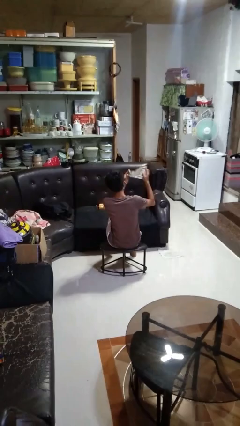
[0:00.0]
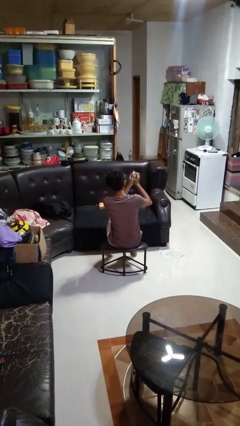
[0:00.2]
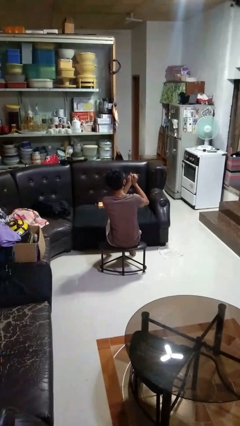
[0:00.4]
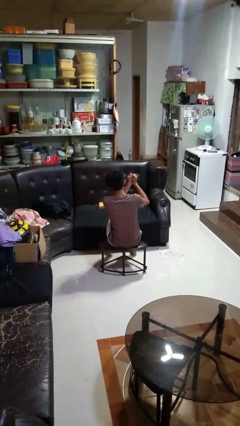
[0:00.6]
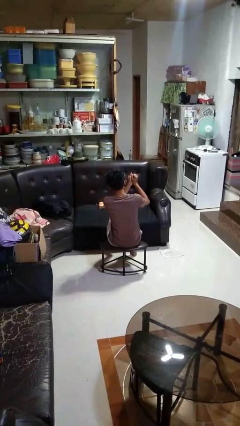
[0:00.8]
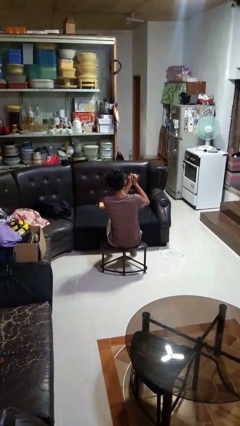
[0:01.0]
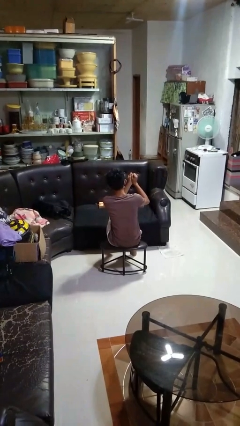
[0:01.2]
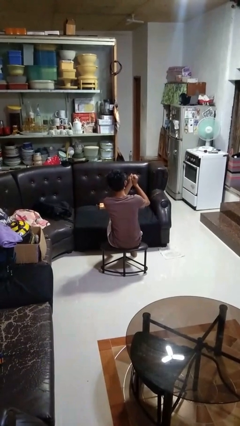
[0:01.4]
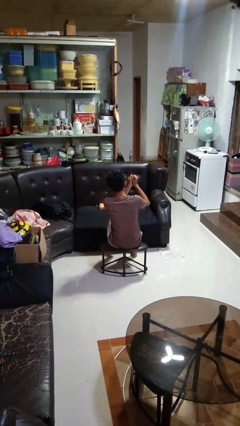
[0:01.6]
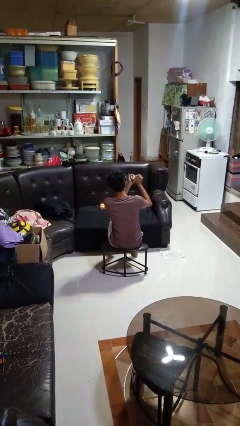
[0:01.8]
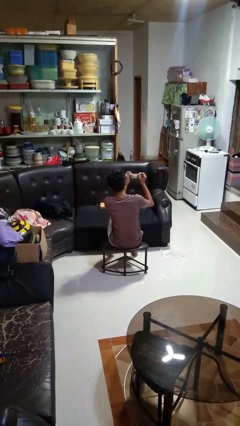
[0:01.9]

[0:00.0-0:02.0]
person crumples paper

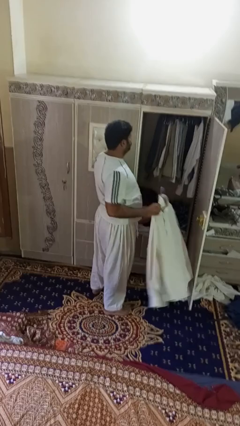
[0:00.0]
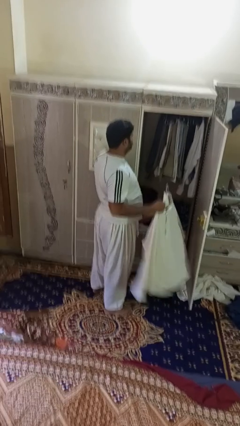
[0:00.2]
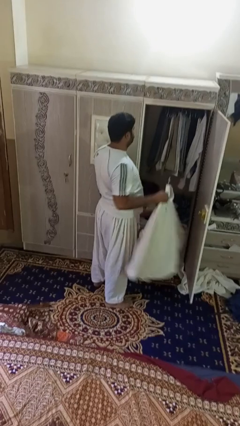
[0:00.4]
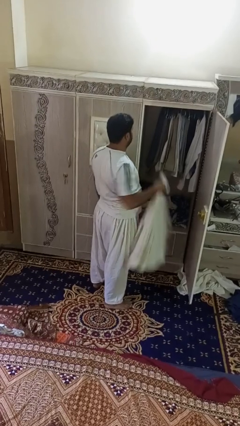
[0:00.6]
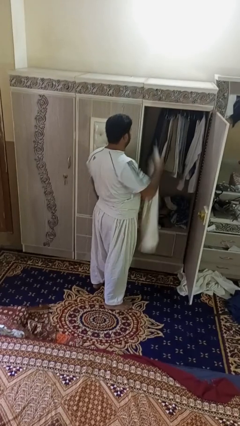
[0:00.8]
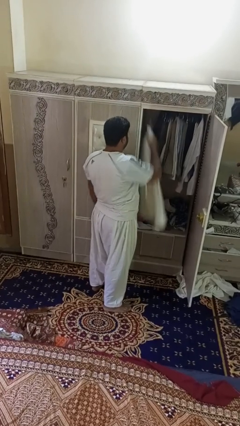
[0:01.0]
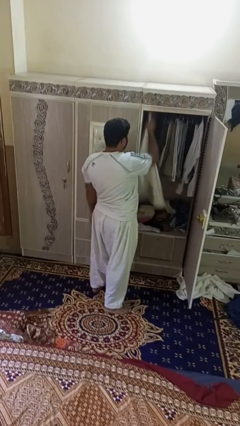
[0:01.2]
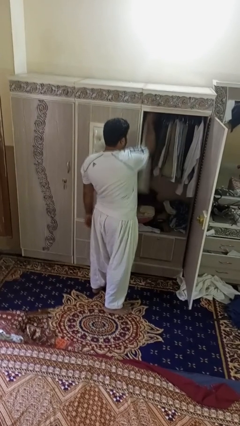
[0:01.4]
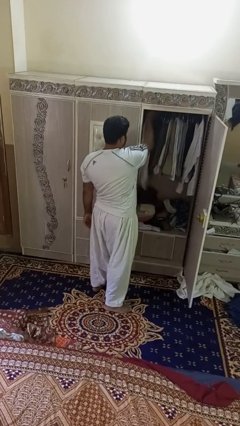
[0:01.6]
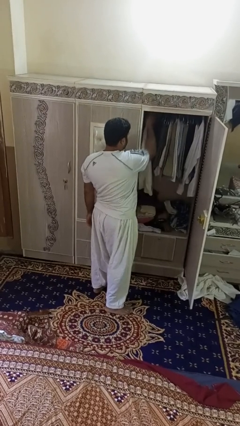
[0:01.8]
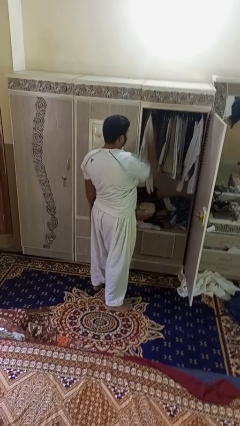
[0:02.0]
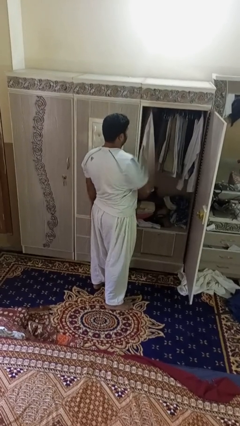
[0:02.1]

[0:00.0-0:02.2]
person puts clothes into closet

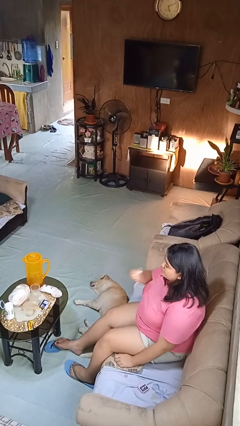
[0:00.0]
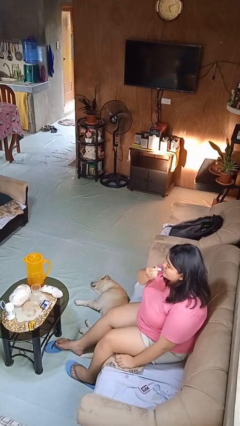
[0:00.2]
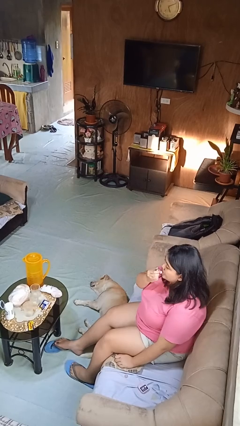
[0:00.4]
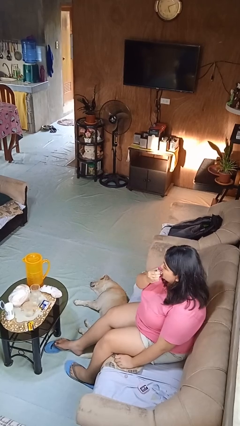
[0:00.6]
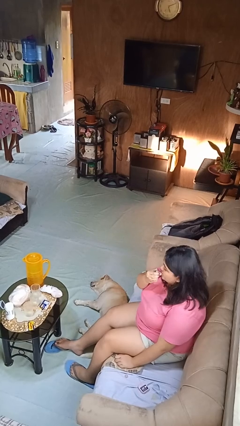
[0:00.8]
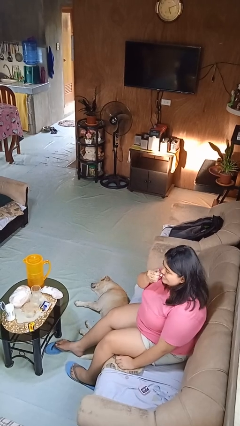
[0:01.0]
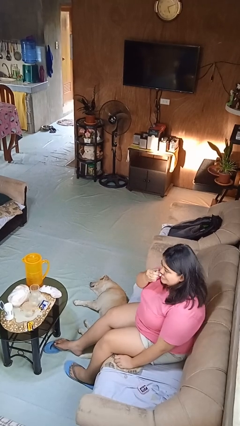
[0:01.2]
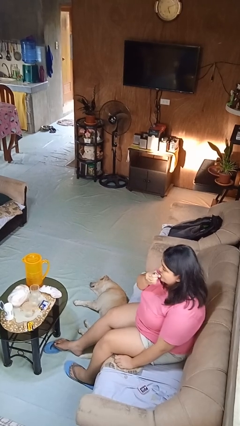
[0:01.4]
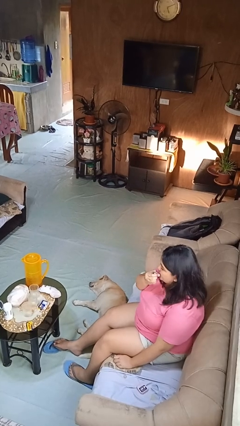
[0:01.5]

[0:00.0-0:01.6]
person applies lip makeup

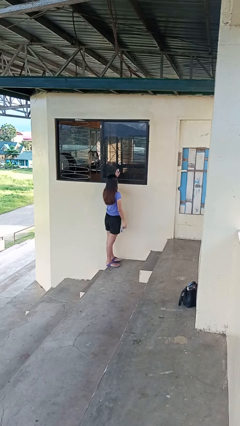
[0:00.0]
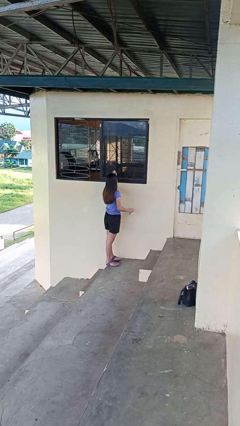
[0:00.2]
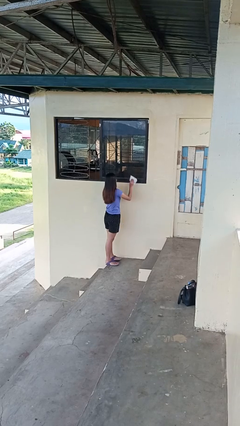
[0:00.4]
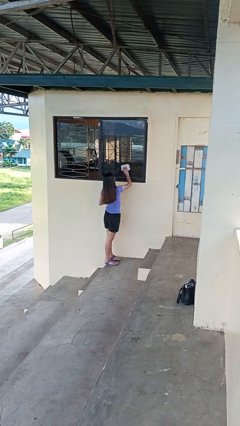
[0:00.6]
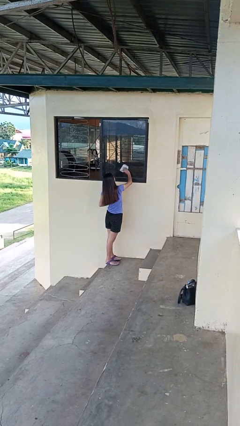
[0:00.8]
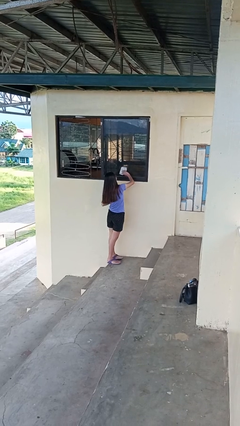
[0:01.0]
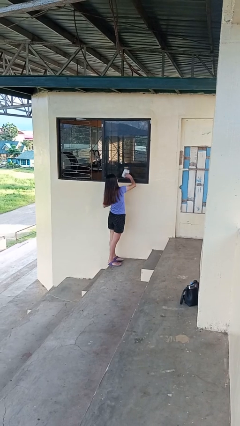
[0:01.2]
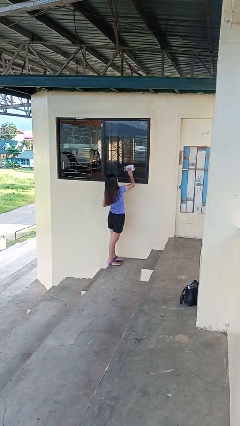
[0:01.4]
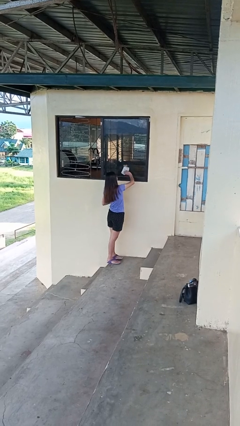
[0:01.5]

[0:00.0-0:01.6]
person washes window

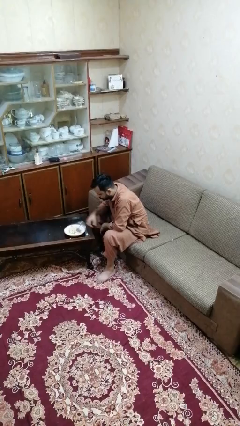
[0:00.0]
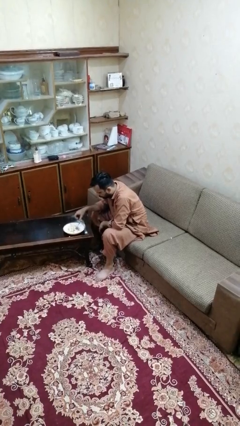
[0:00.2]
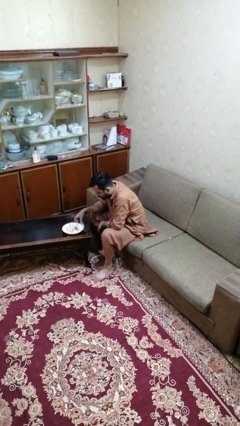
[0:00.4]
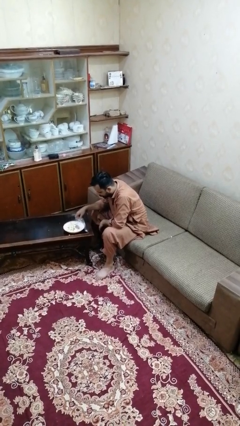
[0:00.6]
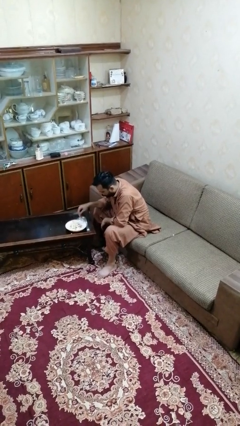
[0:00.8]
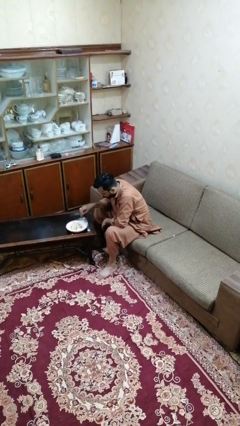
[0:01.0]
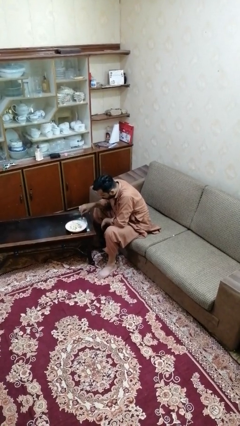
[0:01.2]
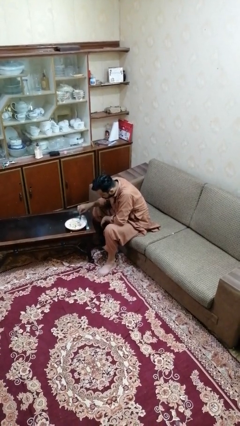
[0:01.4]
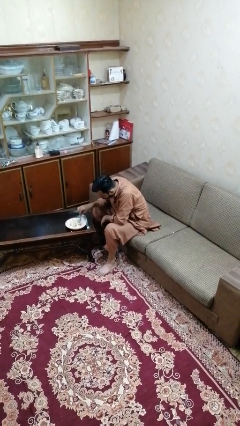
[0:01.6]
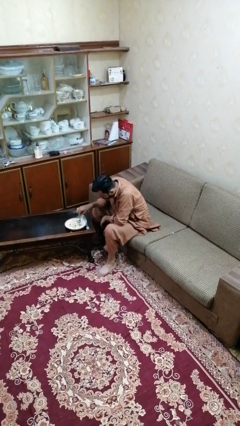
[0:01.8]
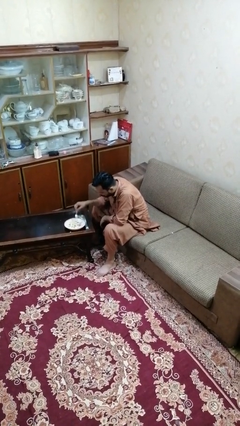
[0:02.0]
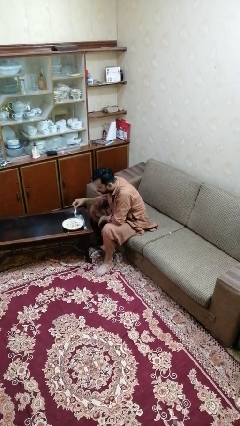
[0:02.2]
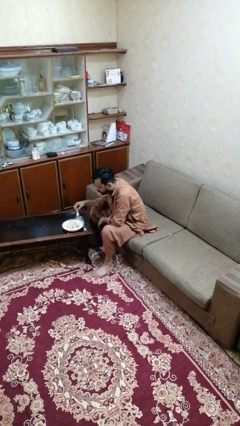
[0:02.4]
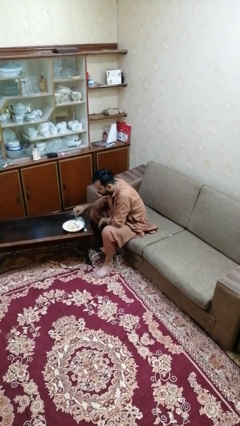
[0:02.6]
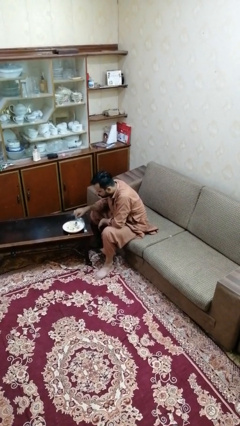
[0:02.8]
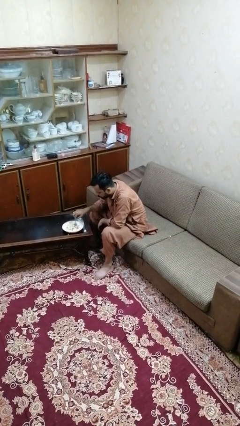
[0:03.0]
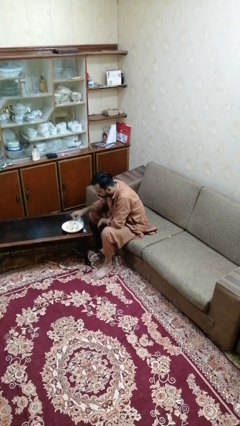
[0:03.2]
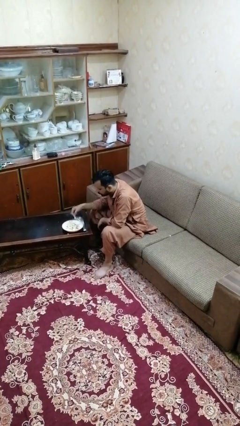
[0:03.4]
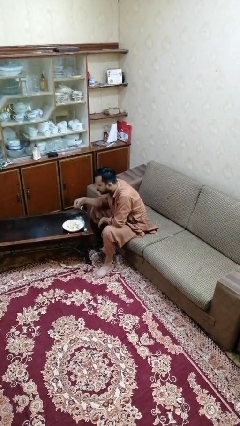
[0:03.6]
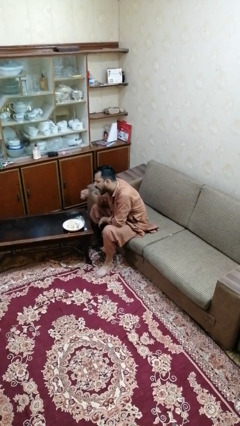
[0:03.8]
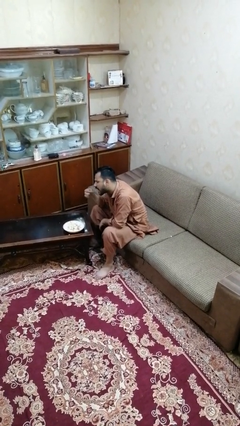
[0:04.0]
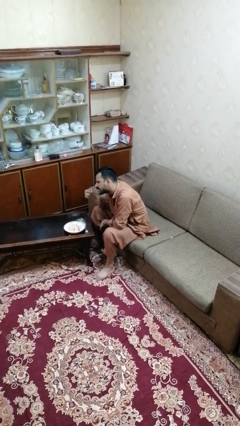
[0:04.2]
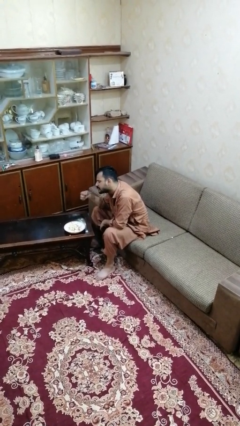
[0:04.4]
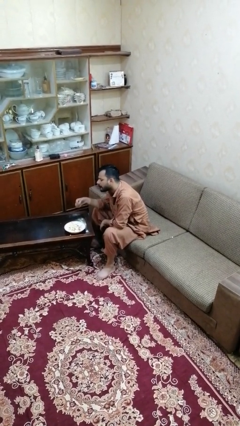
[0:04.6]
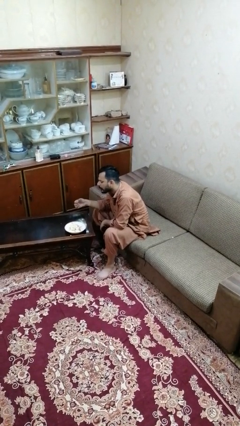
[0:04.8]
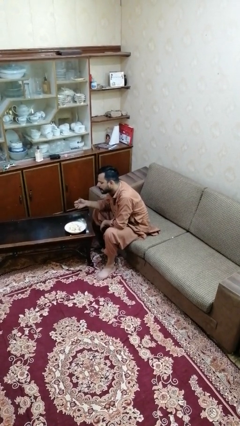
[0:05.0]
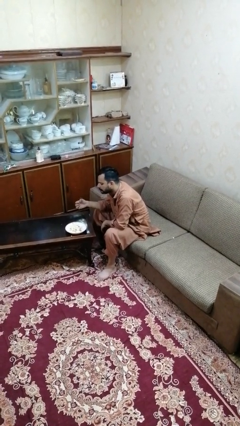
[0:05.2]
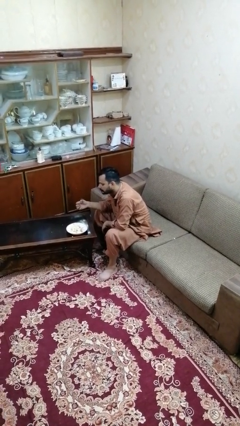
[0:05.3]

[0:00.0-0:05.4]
person eats with utensil

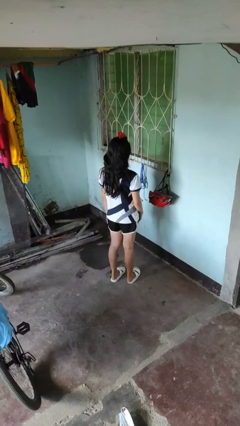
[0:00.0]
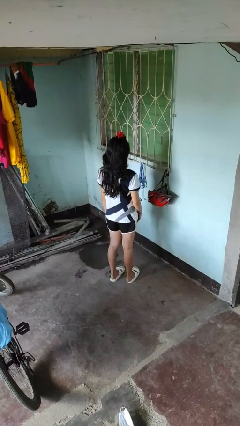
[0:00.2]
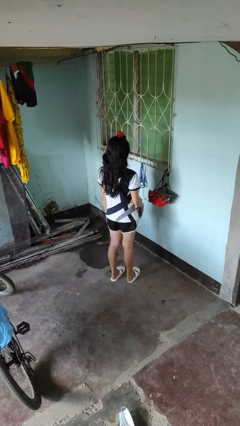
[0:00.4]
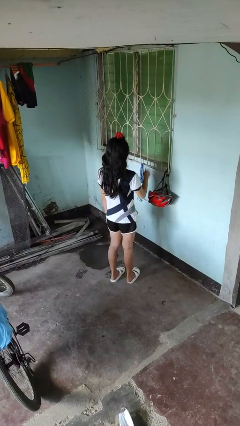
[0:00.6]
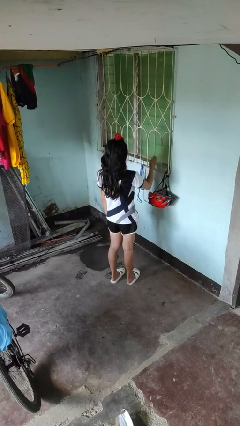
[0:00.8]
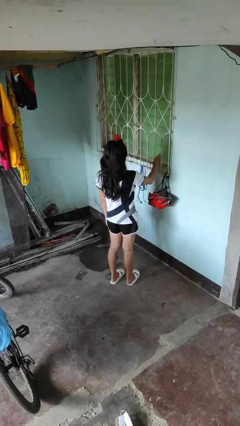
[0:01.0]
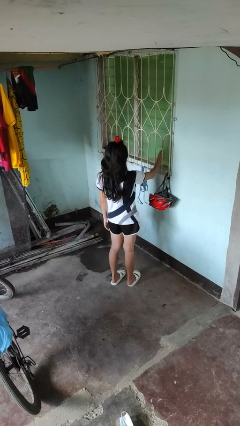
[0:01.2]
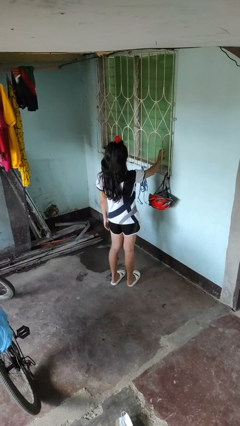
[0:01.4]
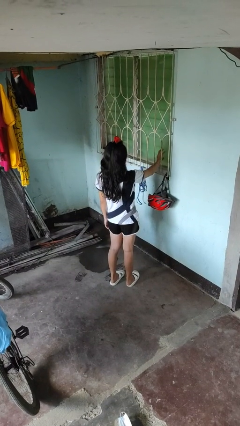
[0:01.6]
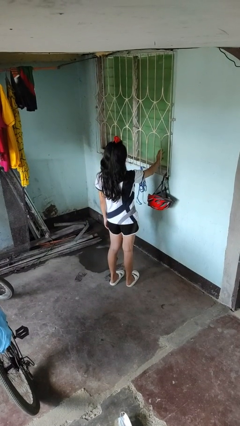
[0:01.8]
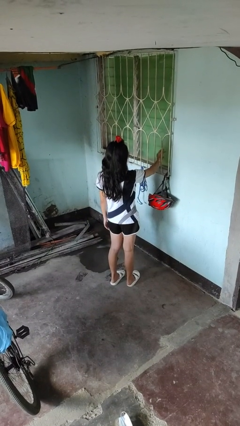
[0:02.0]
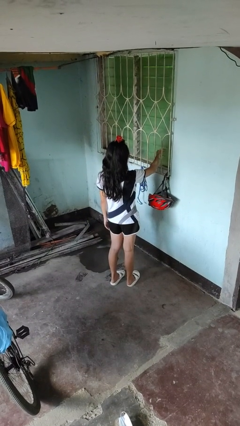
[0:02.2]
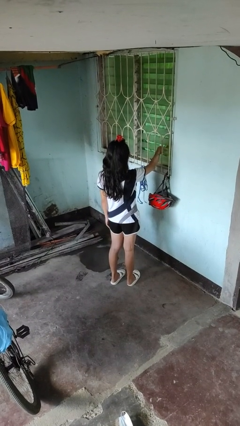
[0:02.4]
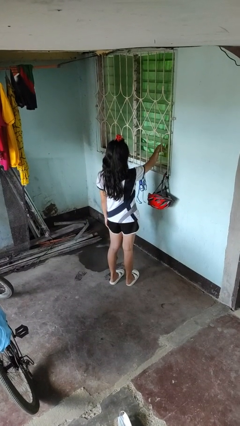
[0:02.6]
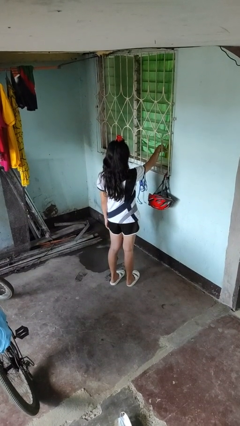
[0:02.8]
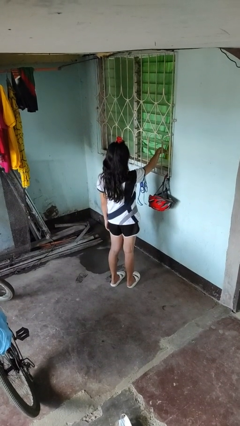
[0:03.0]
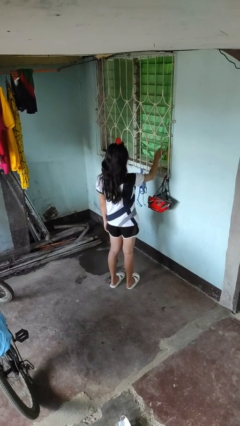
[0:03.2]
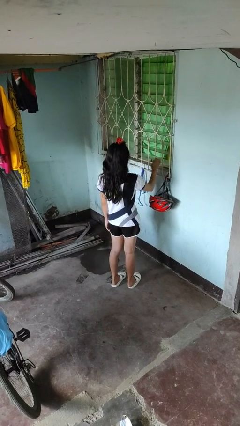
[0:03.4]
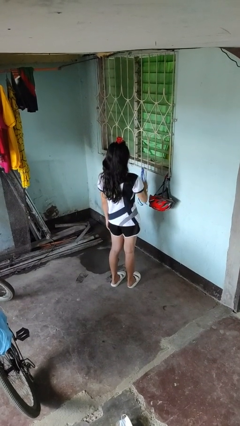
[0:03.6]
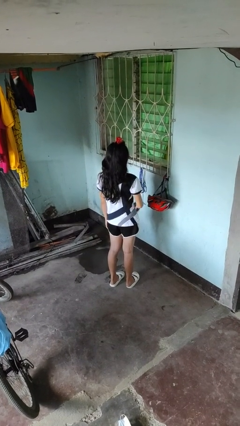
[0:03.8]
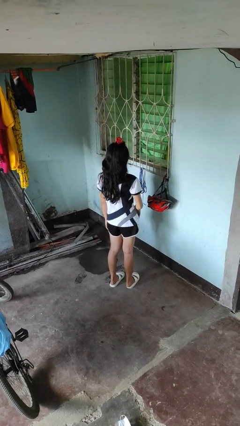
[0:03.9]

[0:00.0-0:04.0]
person opens home window

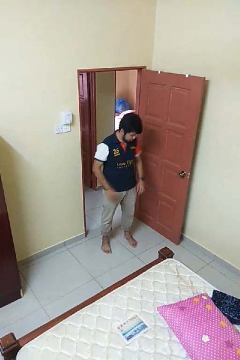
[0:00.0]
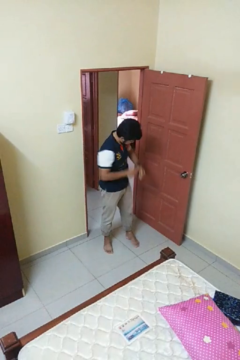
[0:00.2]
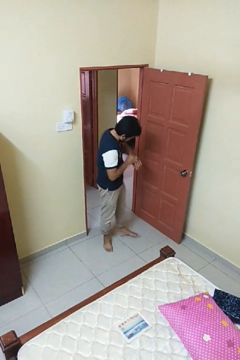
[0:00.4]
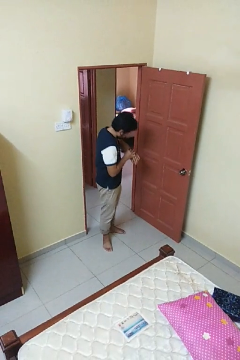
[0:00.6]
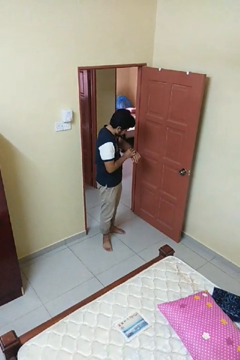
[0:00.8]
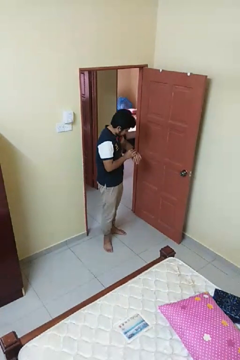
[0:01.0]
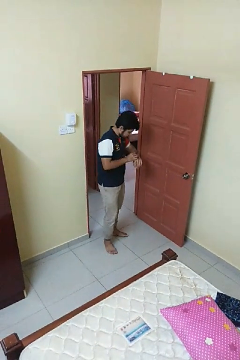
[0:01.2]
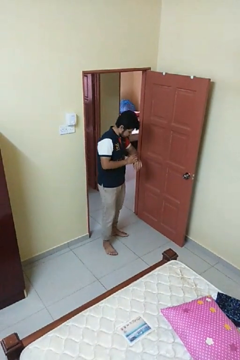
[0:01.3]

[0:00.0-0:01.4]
person looks at wristwatch
